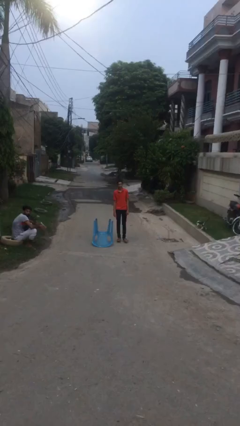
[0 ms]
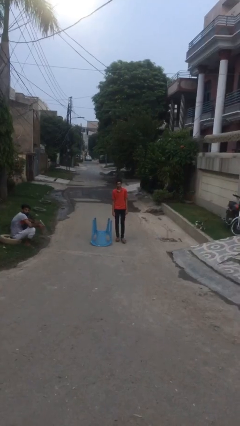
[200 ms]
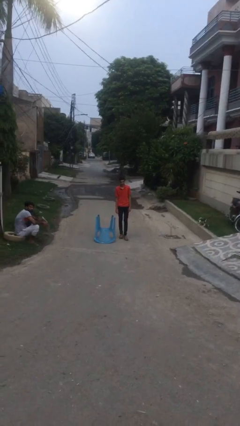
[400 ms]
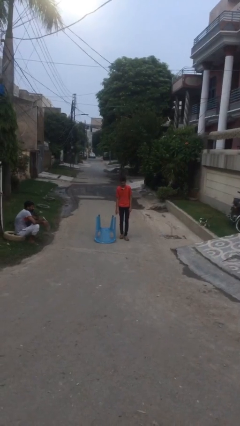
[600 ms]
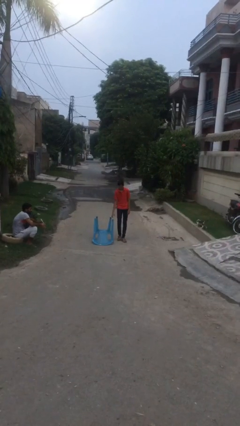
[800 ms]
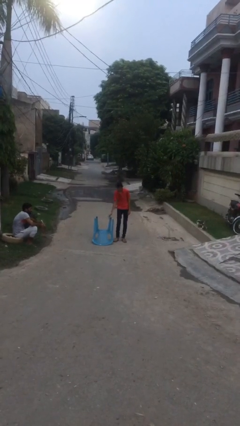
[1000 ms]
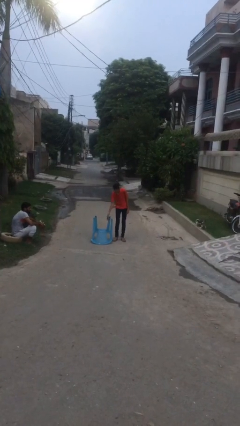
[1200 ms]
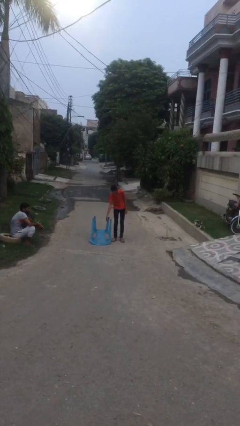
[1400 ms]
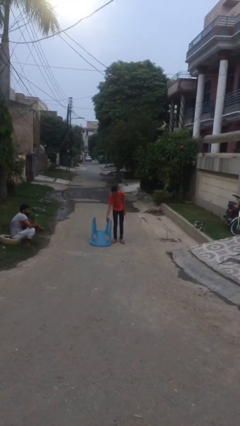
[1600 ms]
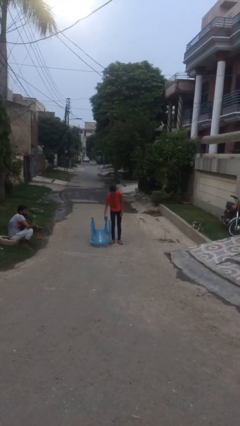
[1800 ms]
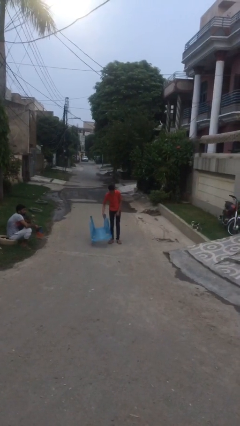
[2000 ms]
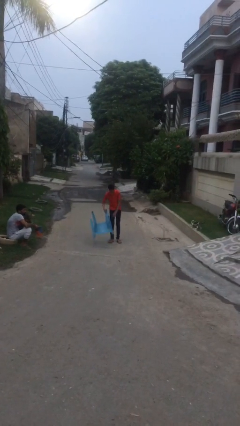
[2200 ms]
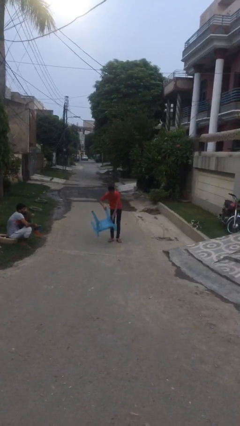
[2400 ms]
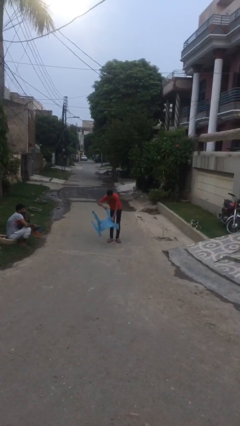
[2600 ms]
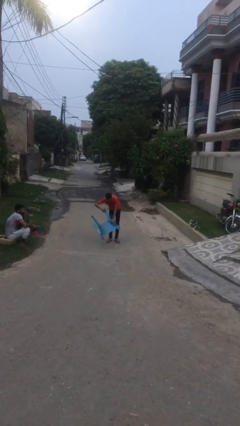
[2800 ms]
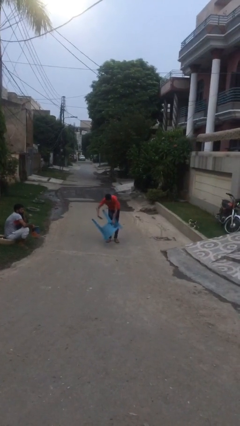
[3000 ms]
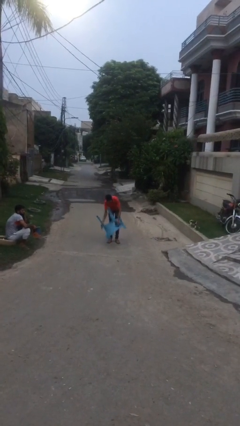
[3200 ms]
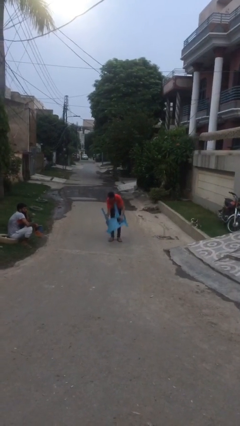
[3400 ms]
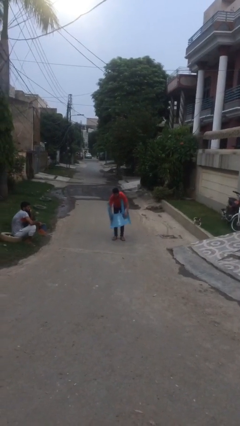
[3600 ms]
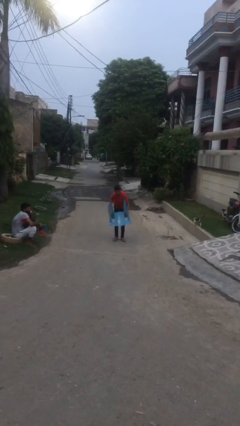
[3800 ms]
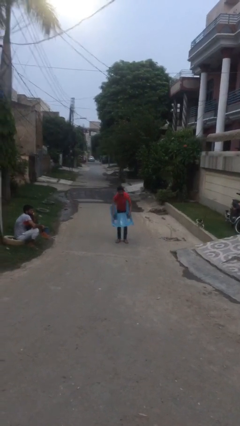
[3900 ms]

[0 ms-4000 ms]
person picks up object from floor

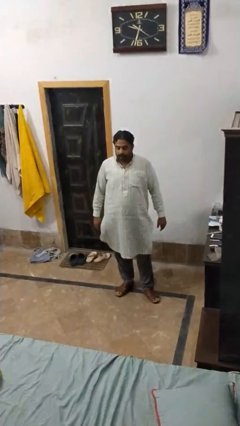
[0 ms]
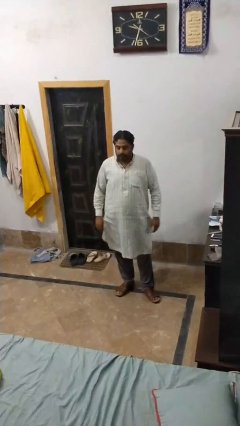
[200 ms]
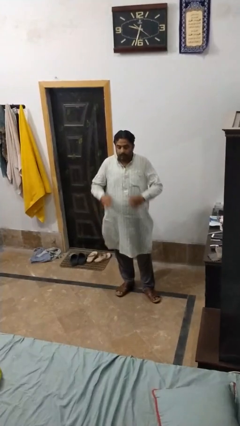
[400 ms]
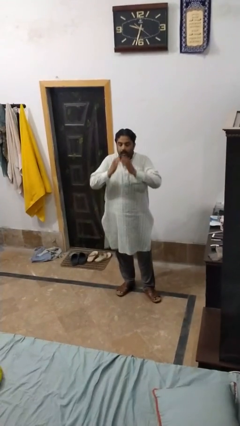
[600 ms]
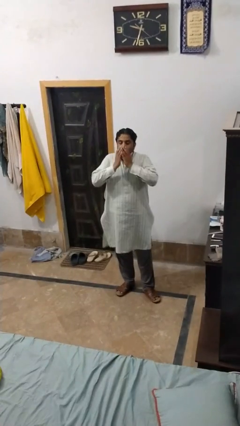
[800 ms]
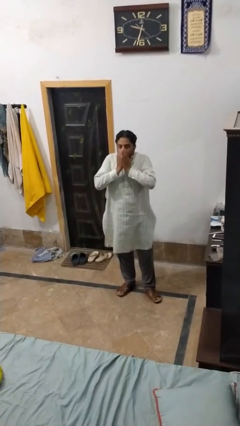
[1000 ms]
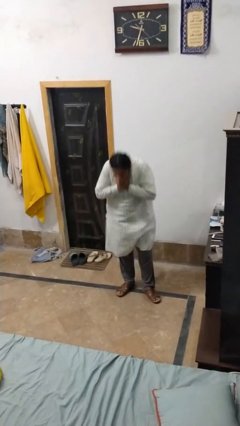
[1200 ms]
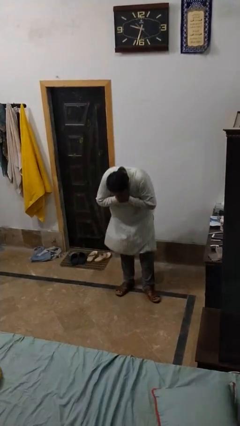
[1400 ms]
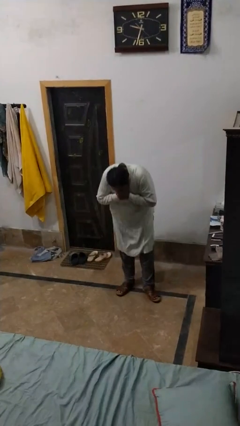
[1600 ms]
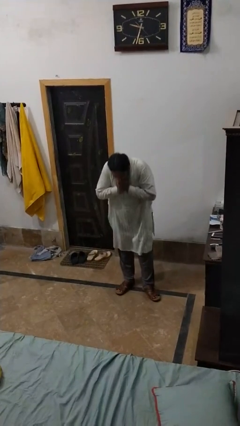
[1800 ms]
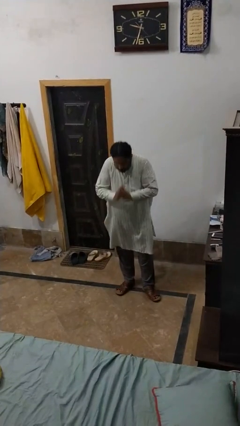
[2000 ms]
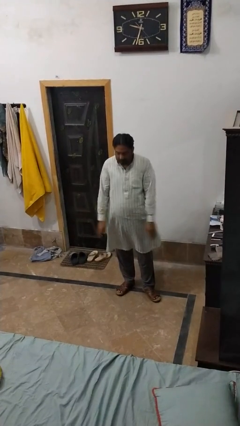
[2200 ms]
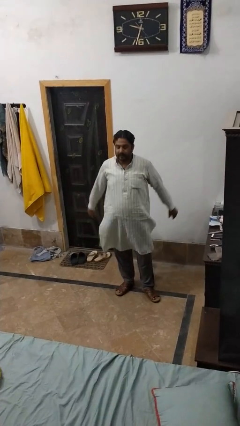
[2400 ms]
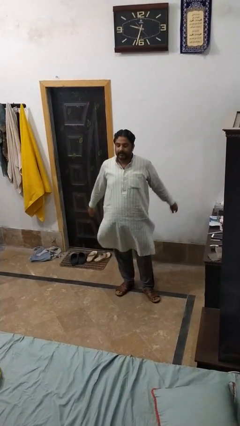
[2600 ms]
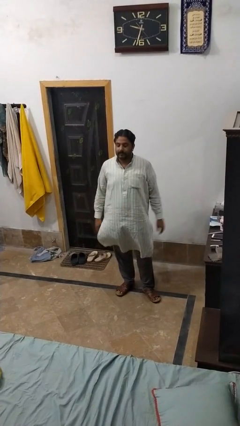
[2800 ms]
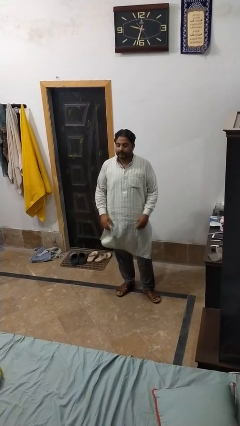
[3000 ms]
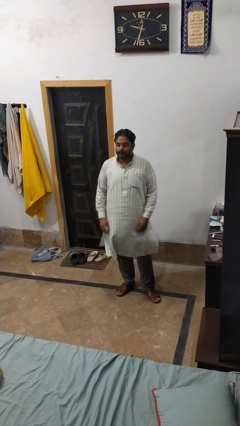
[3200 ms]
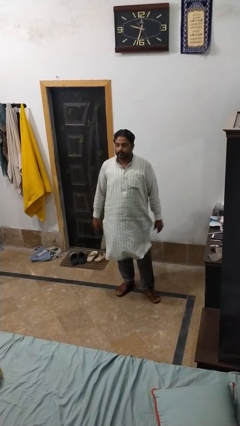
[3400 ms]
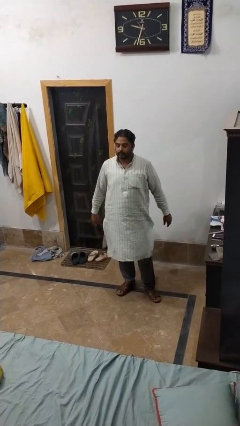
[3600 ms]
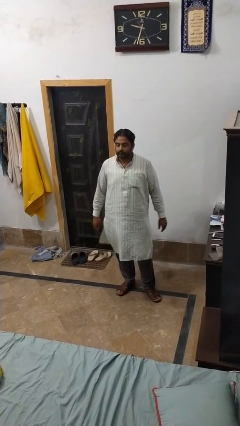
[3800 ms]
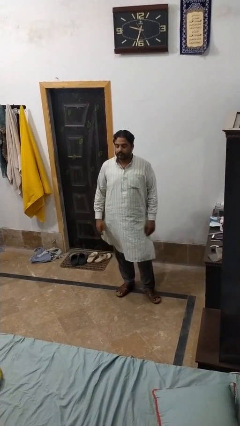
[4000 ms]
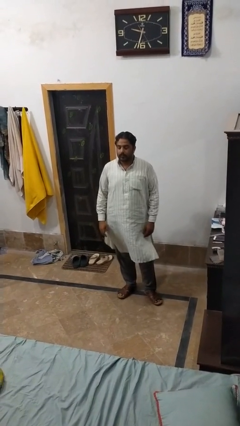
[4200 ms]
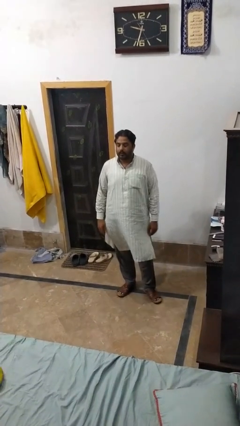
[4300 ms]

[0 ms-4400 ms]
person sneezes into hand

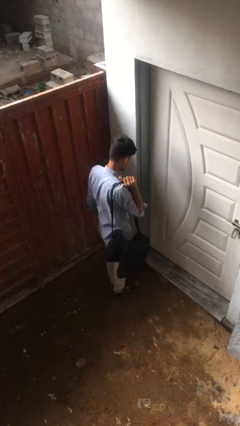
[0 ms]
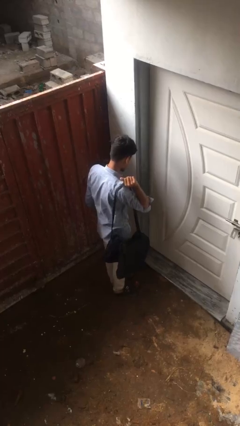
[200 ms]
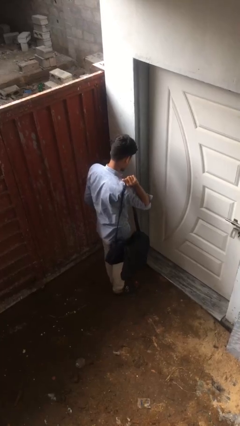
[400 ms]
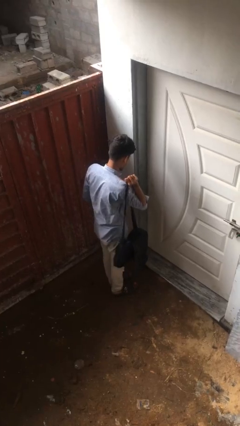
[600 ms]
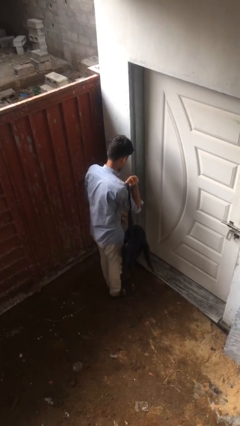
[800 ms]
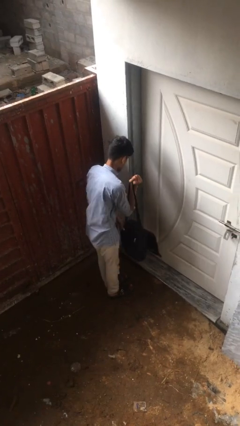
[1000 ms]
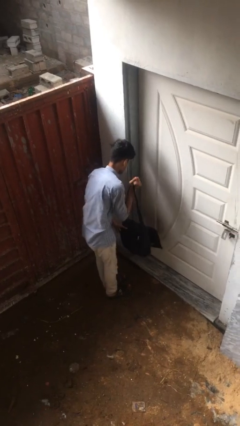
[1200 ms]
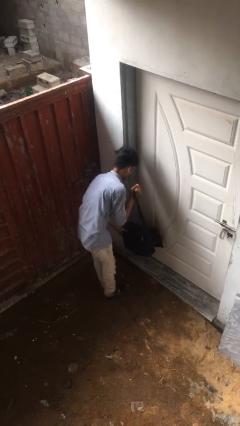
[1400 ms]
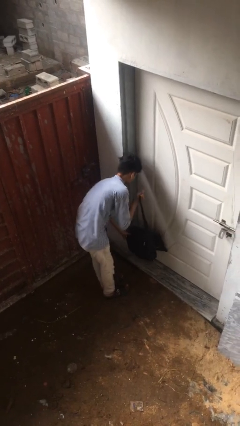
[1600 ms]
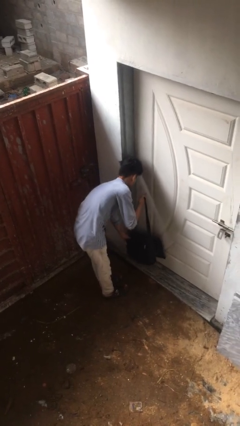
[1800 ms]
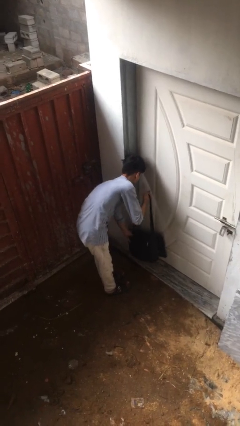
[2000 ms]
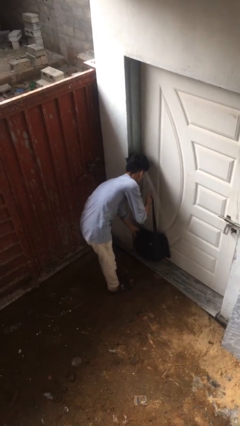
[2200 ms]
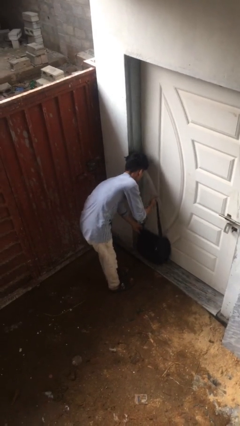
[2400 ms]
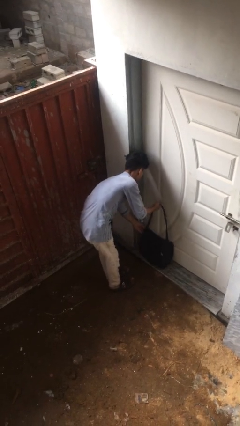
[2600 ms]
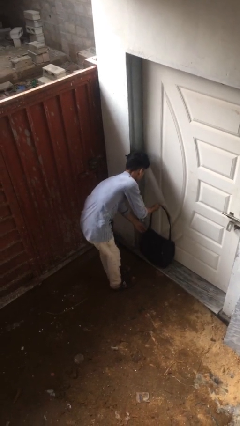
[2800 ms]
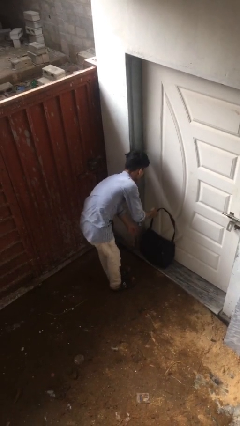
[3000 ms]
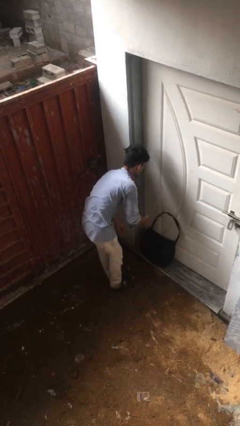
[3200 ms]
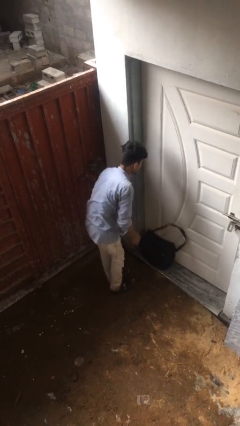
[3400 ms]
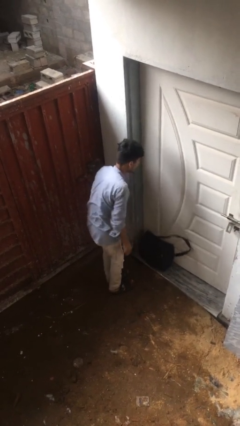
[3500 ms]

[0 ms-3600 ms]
person puts down object on floor

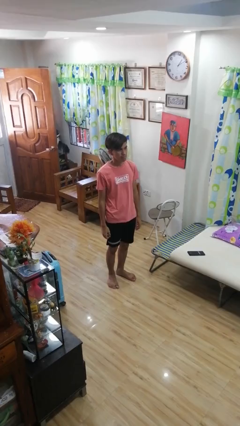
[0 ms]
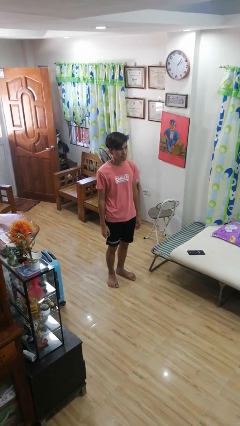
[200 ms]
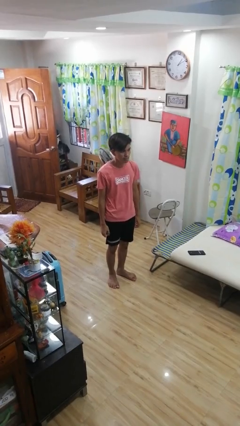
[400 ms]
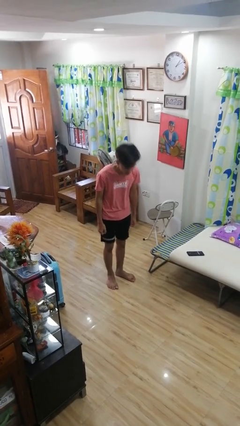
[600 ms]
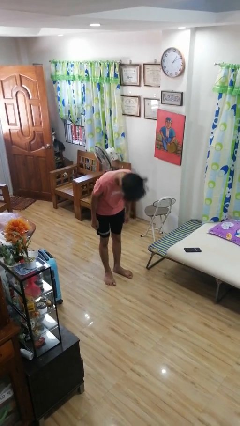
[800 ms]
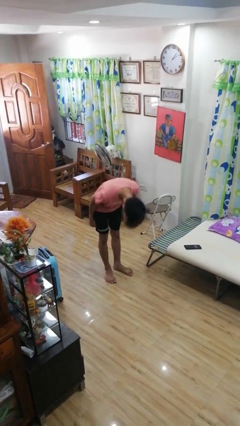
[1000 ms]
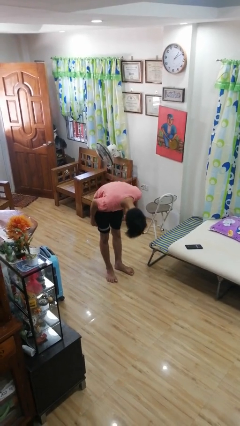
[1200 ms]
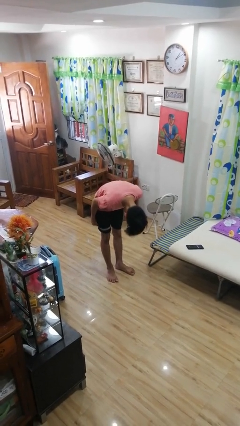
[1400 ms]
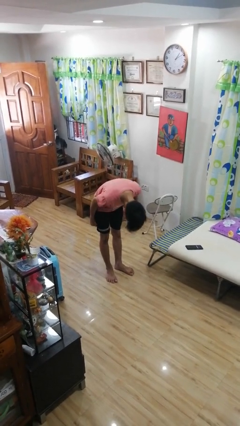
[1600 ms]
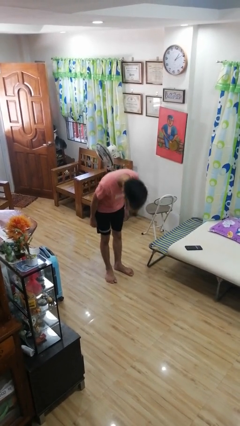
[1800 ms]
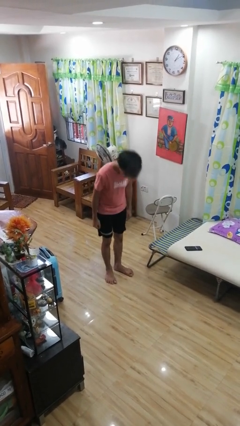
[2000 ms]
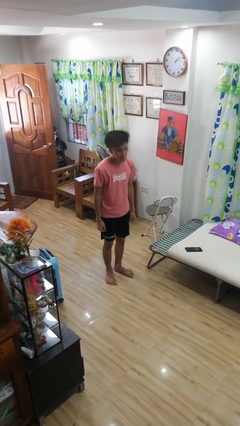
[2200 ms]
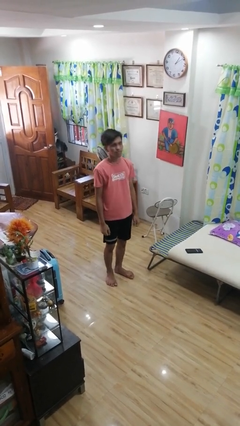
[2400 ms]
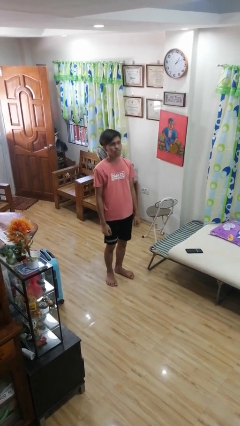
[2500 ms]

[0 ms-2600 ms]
person bows

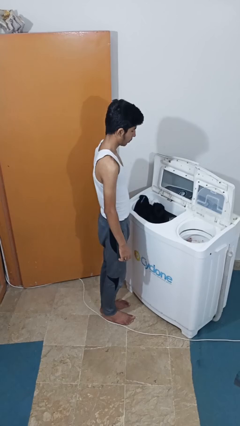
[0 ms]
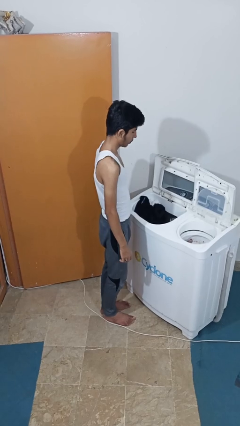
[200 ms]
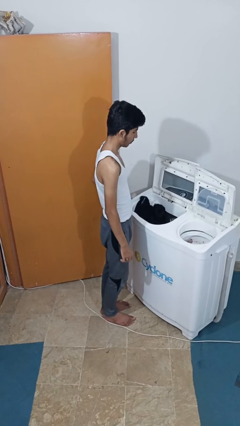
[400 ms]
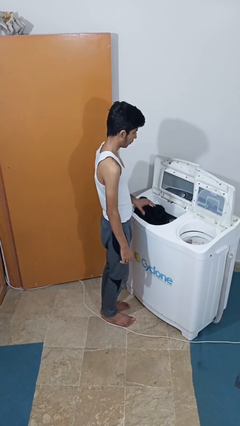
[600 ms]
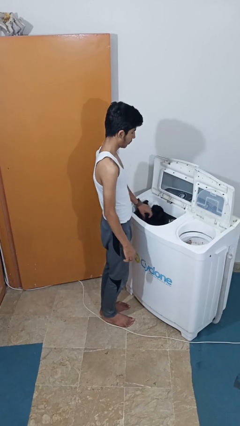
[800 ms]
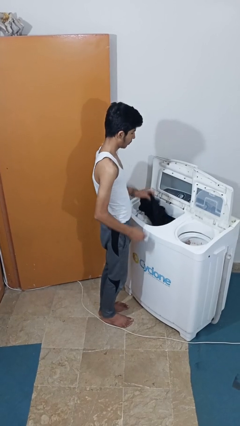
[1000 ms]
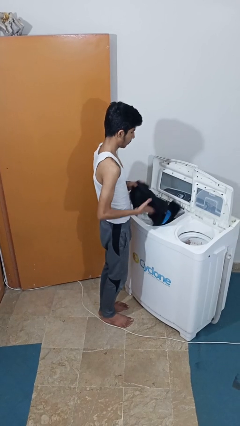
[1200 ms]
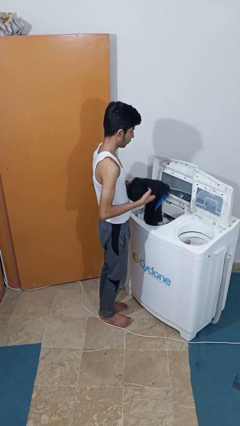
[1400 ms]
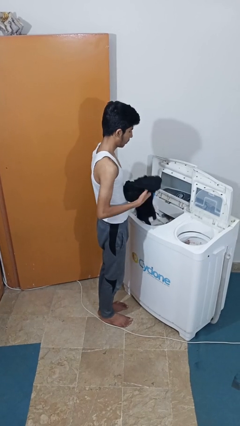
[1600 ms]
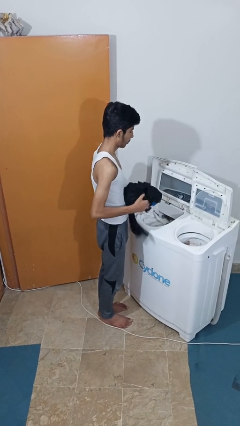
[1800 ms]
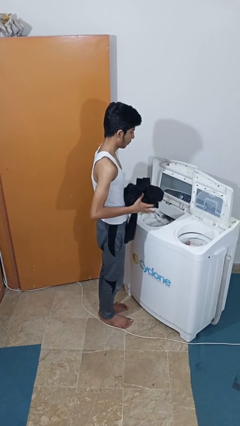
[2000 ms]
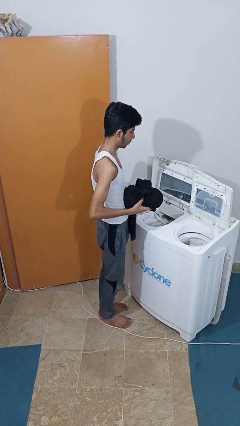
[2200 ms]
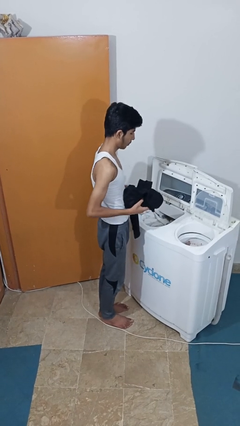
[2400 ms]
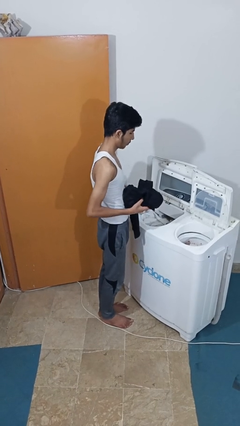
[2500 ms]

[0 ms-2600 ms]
person unloads clotheswasher

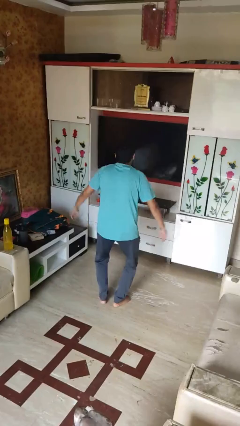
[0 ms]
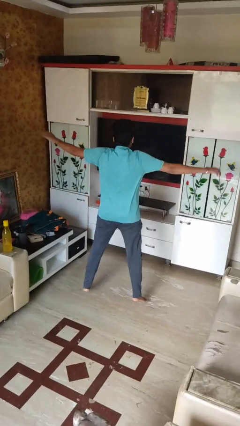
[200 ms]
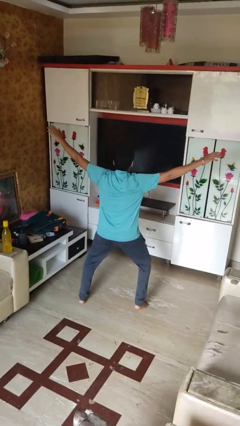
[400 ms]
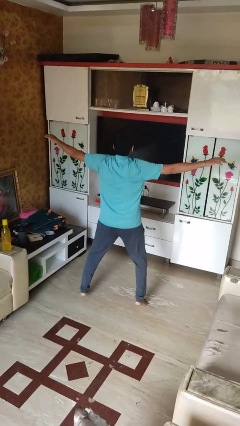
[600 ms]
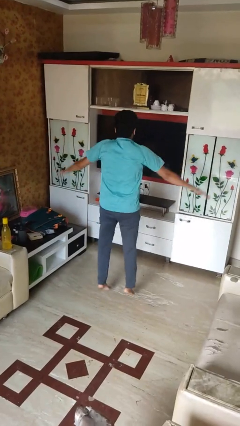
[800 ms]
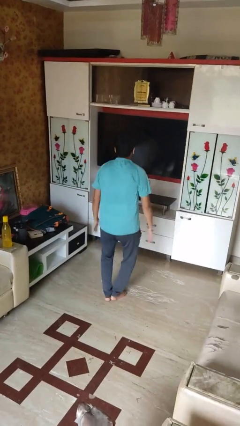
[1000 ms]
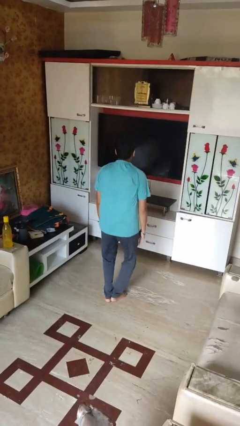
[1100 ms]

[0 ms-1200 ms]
person exercises with jumping jacks
